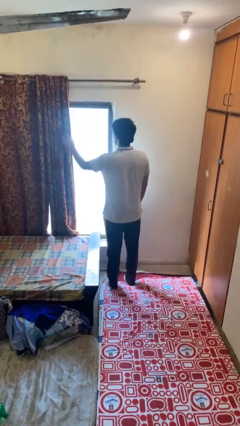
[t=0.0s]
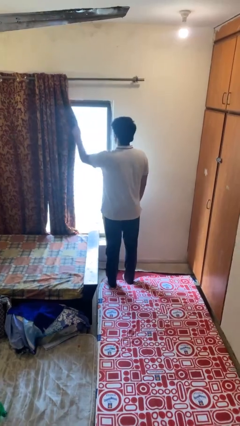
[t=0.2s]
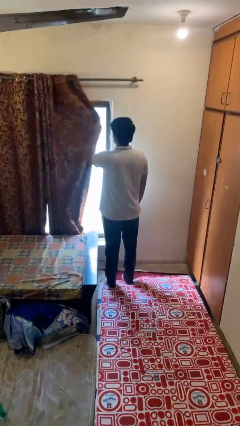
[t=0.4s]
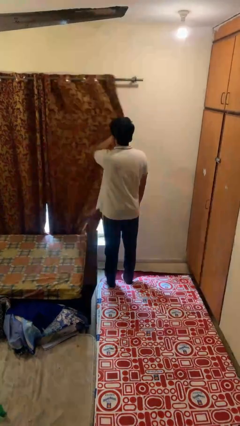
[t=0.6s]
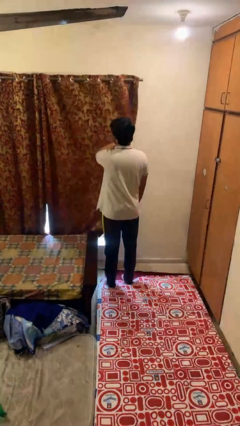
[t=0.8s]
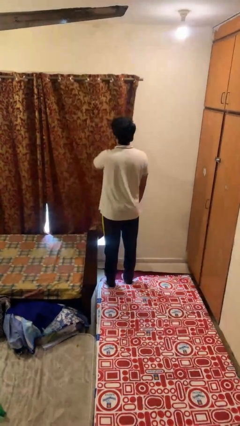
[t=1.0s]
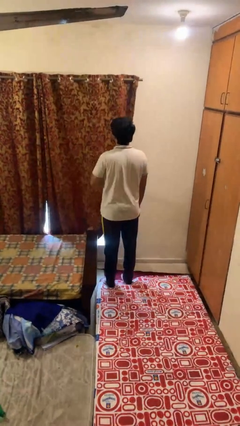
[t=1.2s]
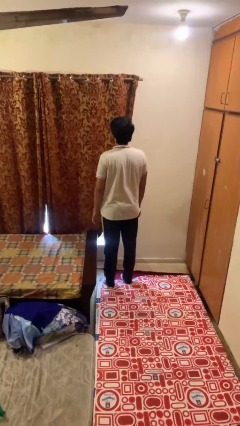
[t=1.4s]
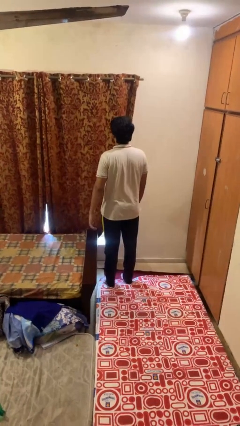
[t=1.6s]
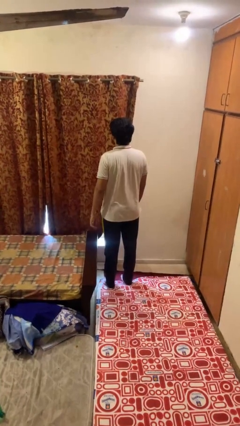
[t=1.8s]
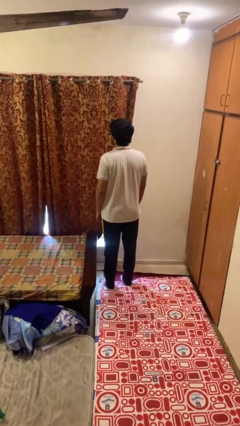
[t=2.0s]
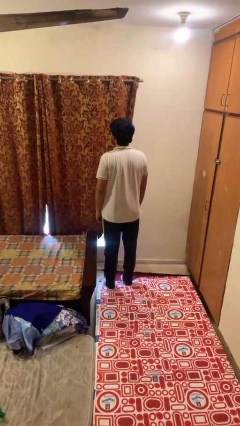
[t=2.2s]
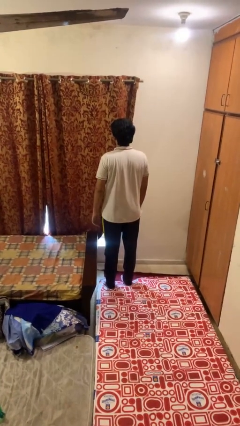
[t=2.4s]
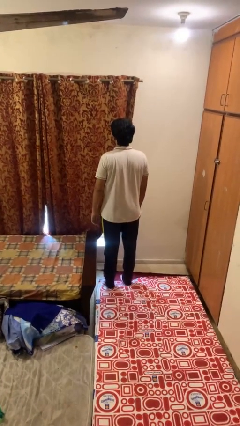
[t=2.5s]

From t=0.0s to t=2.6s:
person closes curtains

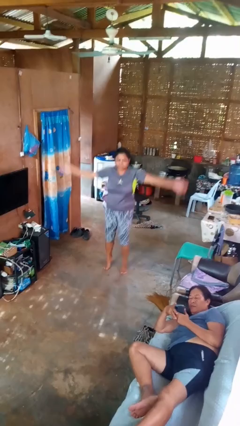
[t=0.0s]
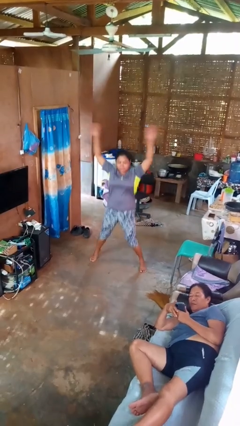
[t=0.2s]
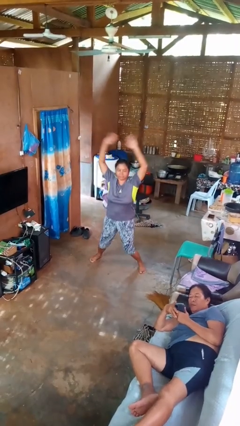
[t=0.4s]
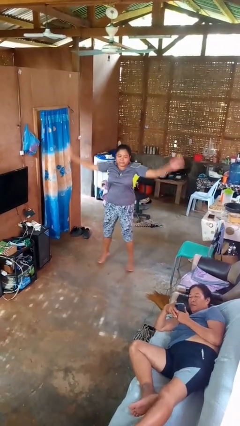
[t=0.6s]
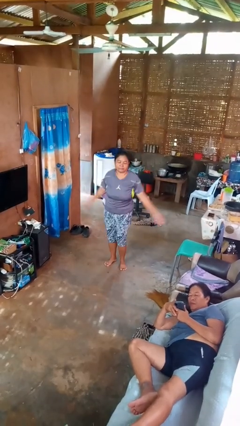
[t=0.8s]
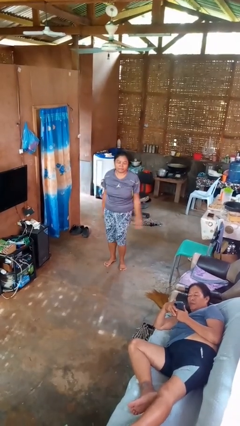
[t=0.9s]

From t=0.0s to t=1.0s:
person exercises with jumping jacks

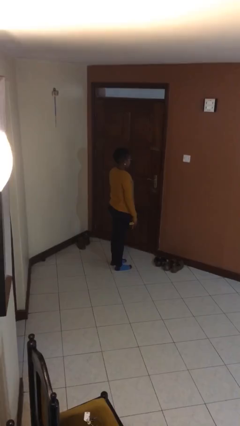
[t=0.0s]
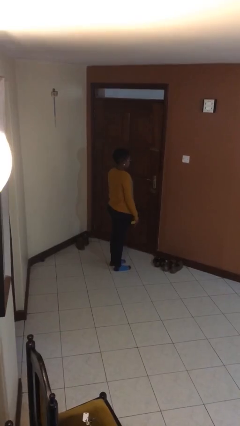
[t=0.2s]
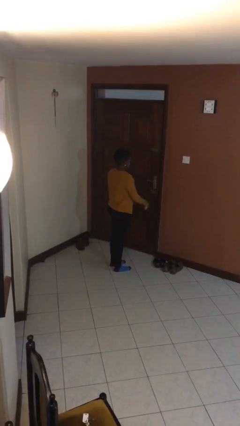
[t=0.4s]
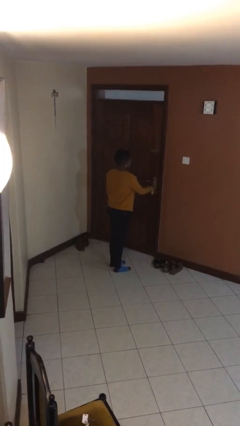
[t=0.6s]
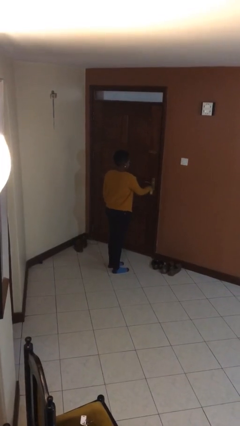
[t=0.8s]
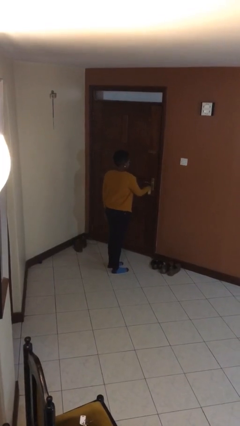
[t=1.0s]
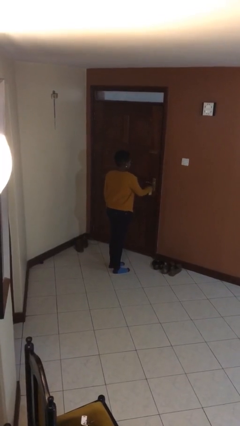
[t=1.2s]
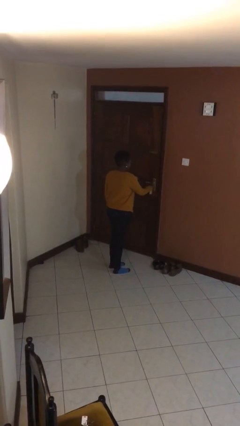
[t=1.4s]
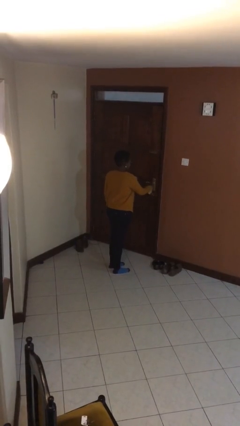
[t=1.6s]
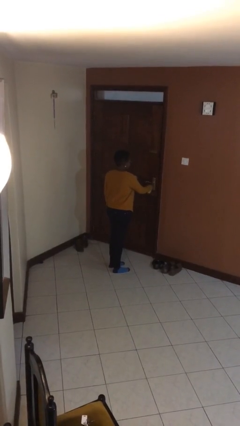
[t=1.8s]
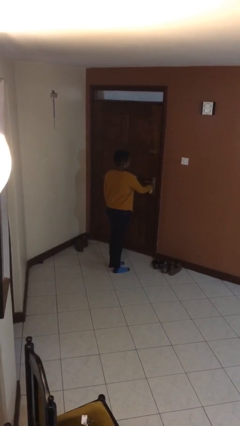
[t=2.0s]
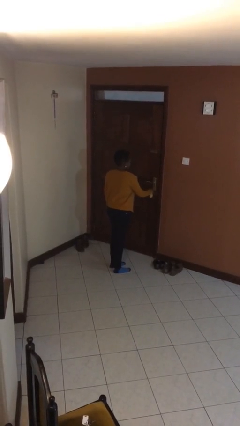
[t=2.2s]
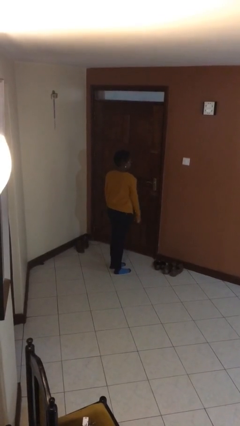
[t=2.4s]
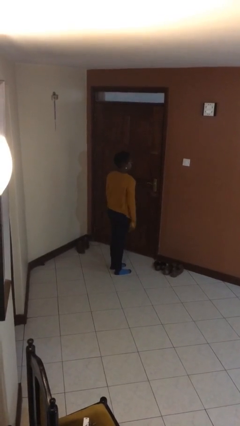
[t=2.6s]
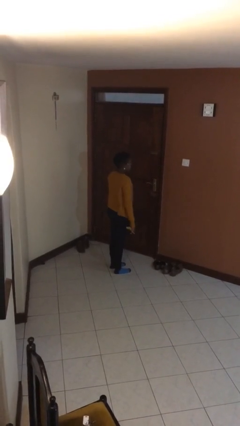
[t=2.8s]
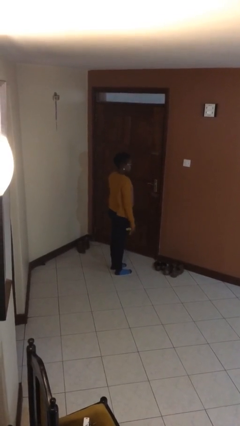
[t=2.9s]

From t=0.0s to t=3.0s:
person locks door with keys

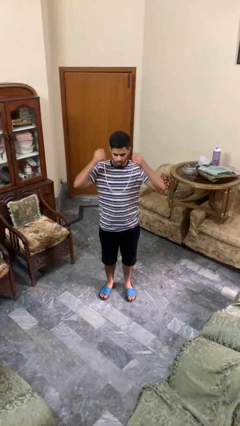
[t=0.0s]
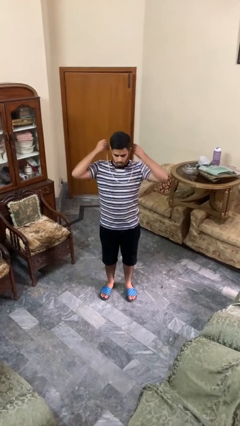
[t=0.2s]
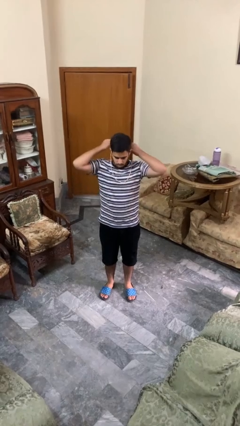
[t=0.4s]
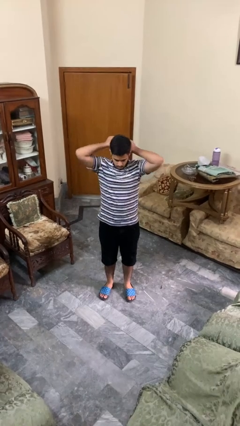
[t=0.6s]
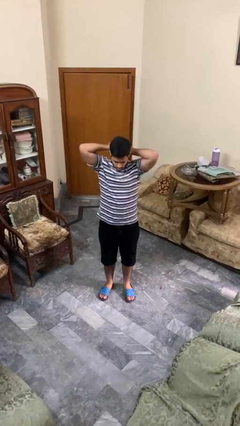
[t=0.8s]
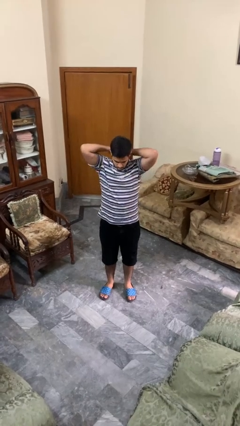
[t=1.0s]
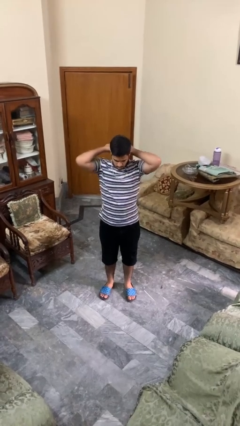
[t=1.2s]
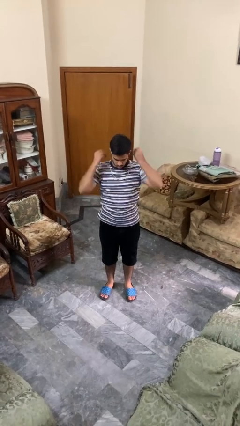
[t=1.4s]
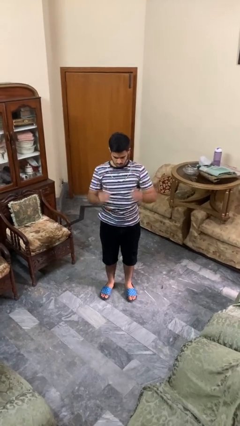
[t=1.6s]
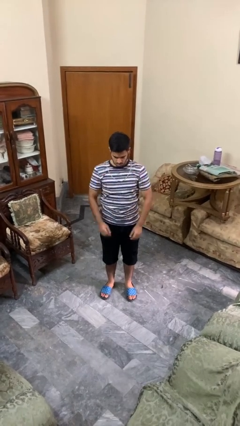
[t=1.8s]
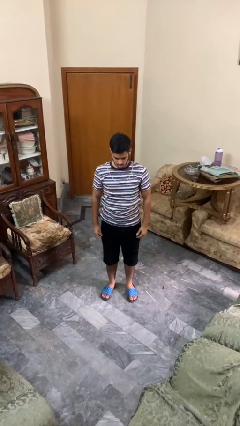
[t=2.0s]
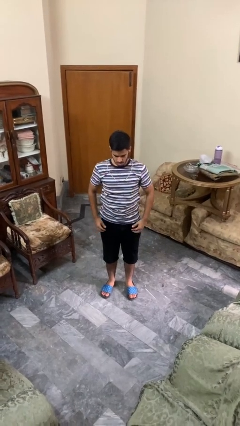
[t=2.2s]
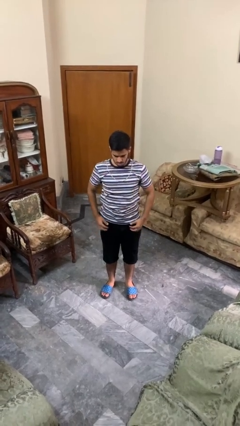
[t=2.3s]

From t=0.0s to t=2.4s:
person puts on necklace

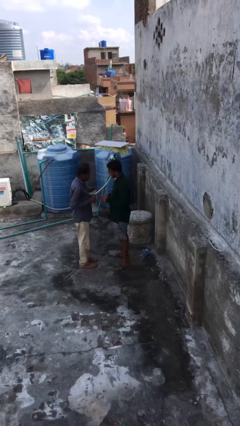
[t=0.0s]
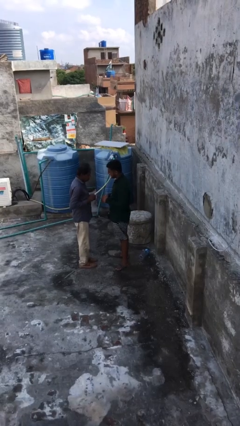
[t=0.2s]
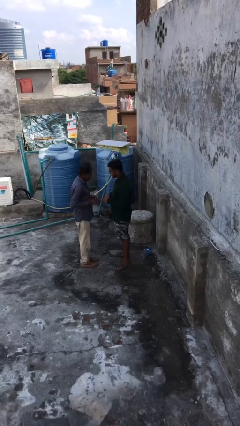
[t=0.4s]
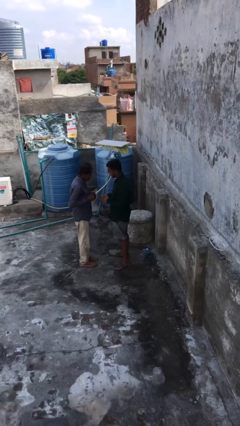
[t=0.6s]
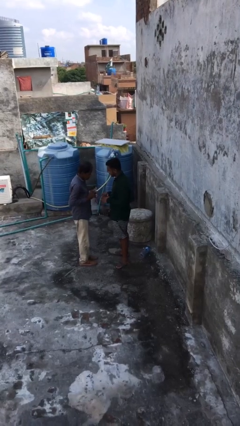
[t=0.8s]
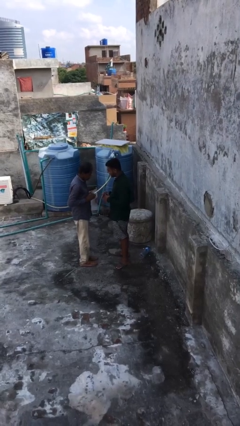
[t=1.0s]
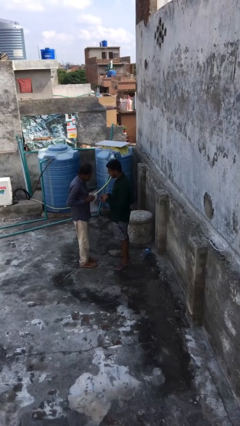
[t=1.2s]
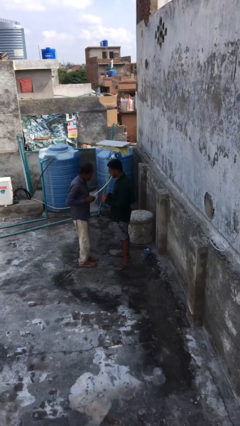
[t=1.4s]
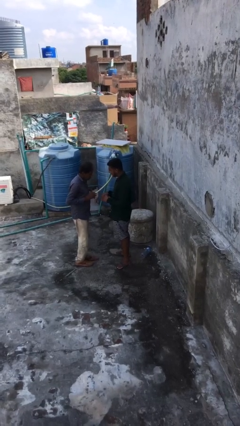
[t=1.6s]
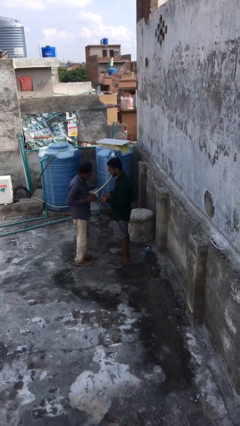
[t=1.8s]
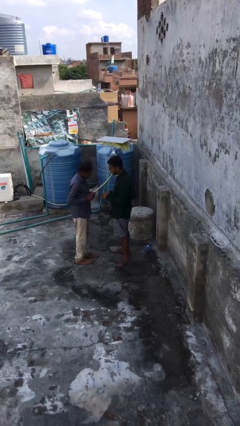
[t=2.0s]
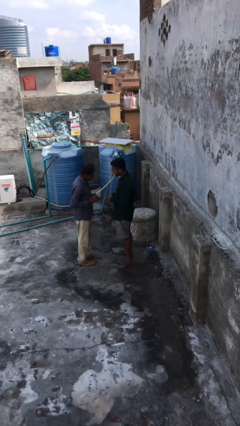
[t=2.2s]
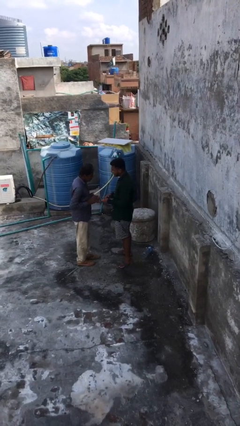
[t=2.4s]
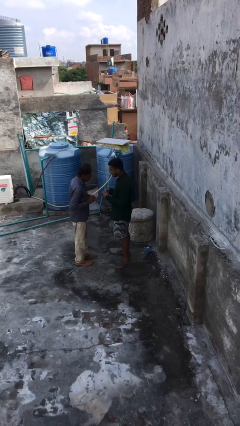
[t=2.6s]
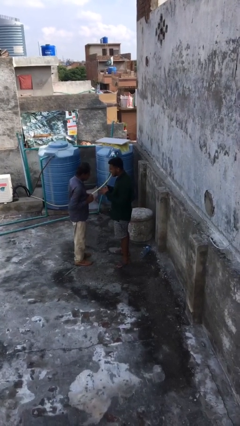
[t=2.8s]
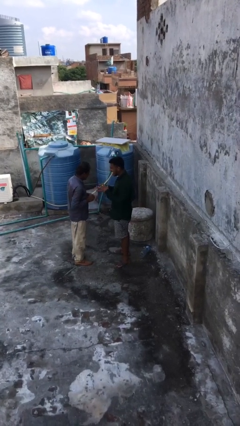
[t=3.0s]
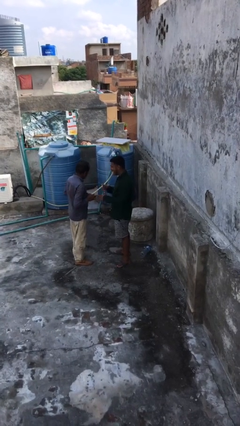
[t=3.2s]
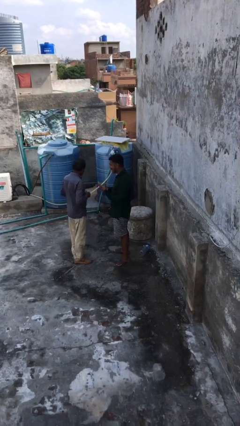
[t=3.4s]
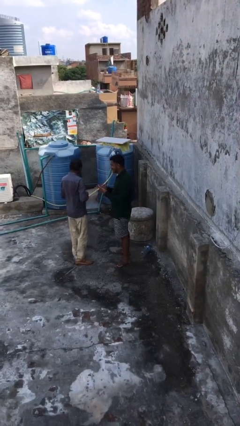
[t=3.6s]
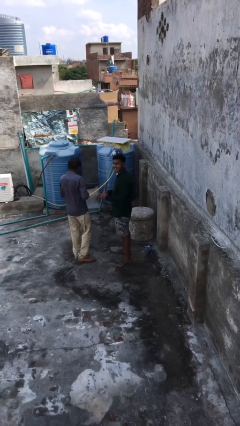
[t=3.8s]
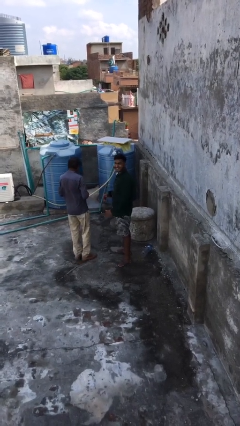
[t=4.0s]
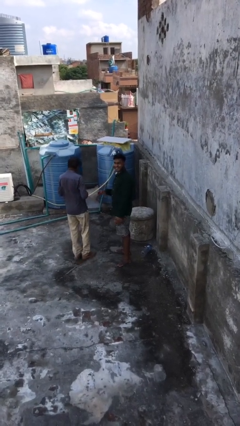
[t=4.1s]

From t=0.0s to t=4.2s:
person talks to person

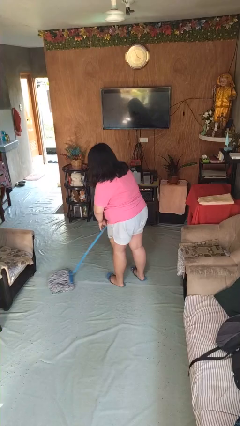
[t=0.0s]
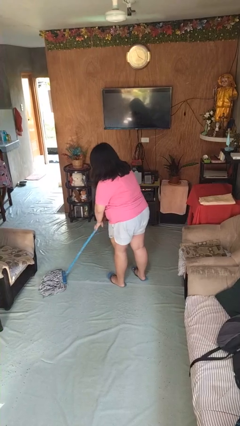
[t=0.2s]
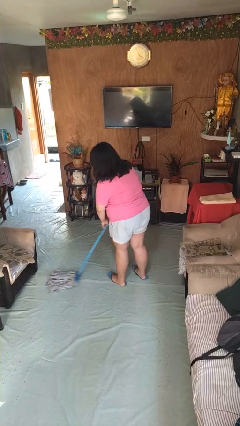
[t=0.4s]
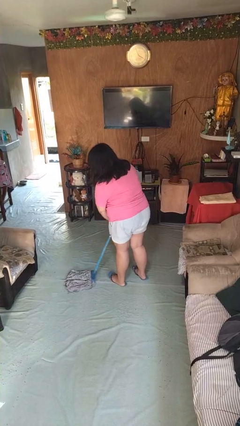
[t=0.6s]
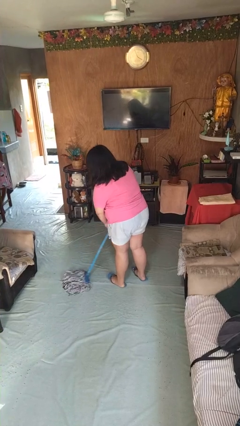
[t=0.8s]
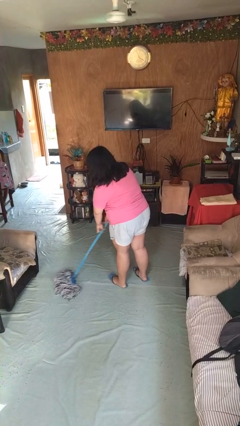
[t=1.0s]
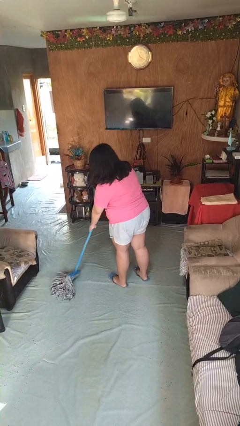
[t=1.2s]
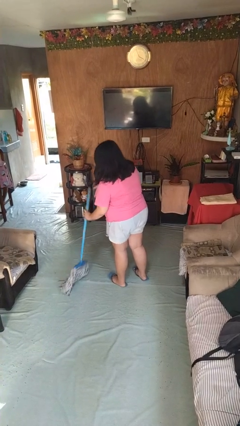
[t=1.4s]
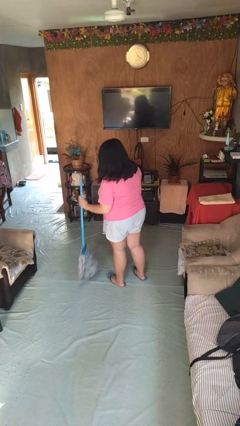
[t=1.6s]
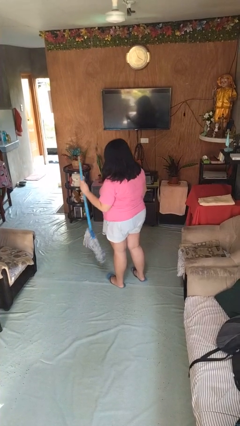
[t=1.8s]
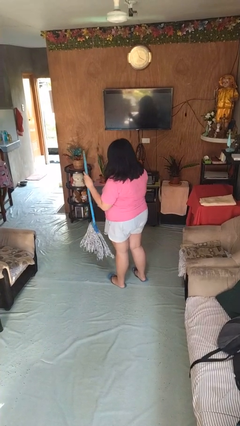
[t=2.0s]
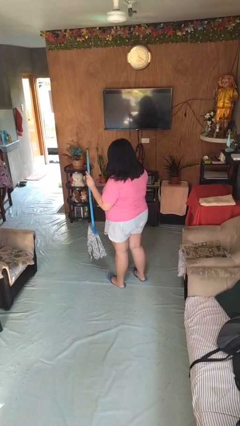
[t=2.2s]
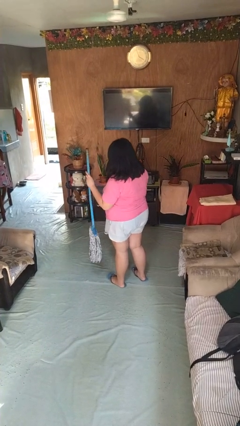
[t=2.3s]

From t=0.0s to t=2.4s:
person mops

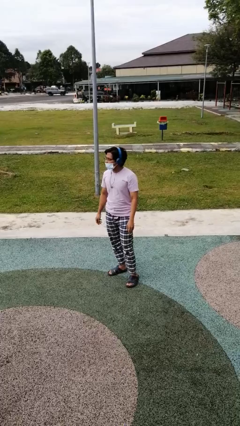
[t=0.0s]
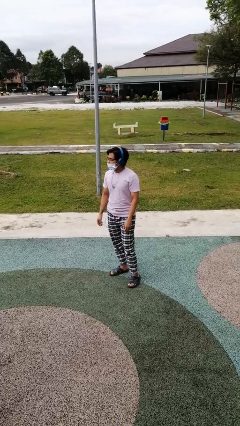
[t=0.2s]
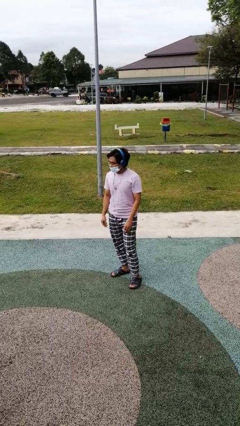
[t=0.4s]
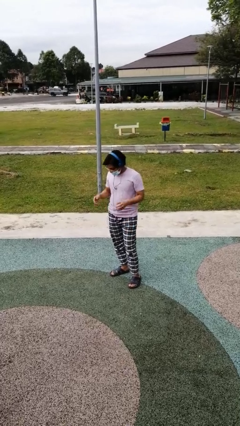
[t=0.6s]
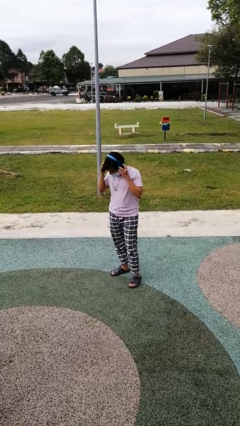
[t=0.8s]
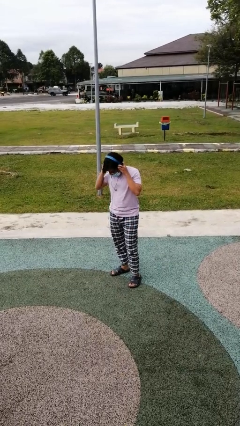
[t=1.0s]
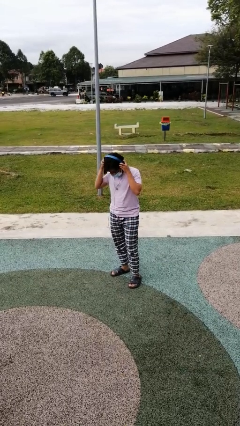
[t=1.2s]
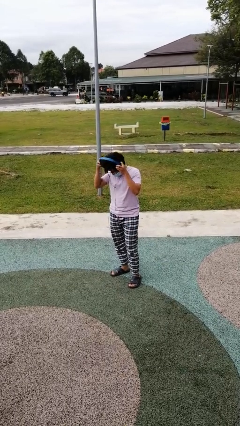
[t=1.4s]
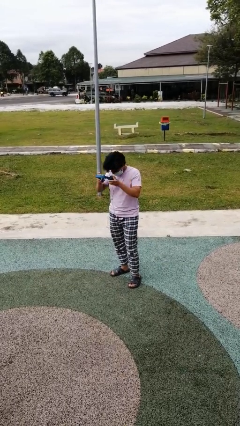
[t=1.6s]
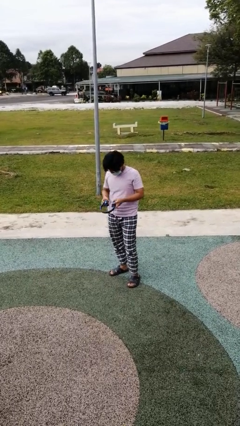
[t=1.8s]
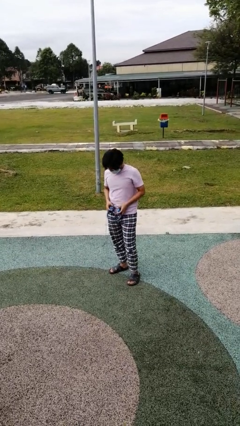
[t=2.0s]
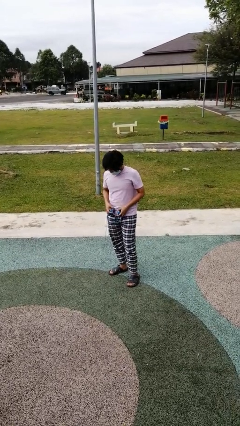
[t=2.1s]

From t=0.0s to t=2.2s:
person takes off headphones
